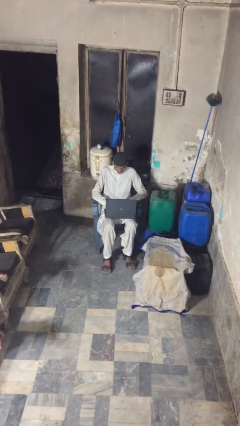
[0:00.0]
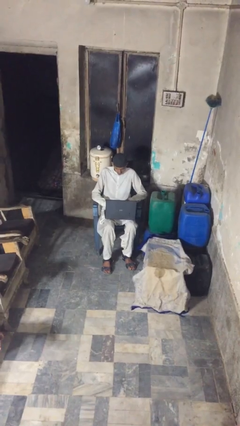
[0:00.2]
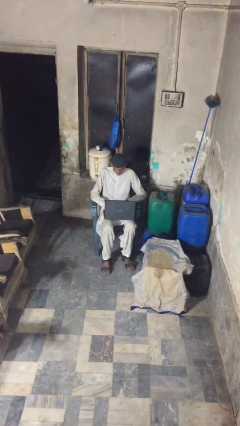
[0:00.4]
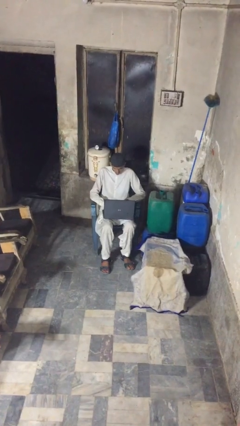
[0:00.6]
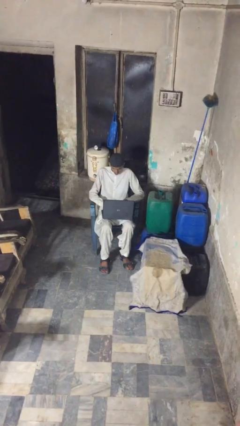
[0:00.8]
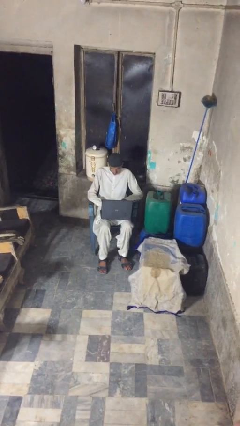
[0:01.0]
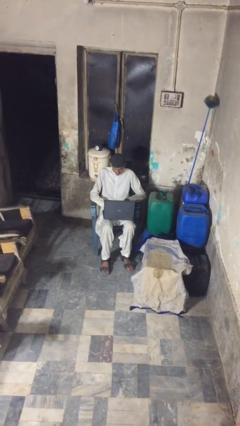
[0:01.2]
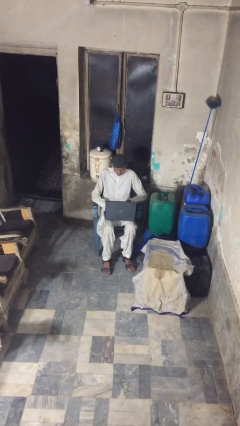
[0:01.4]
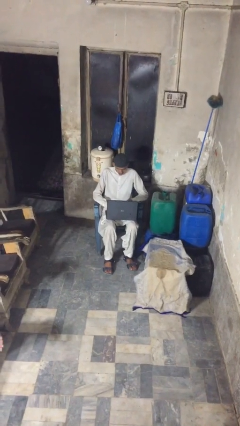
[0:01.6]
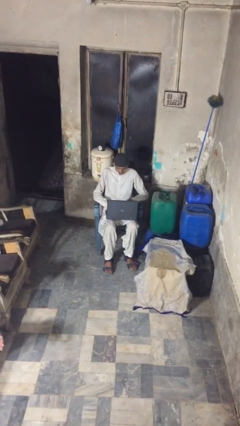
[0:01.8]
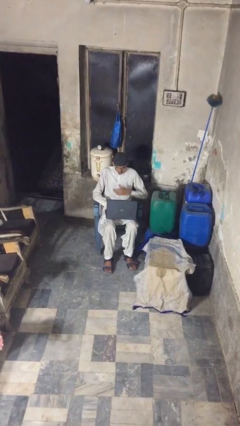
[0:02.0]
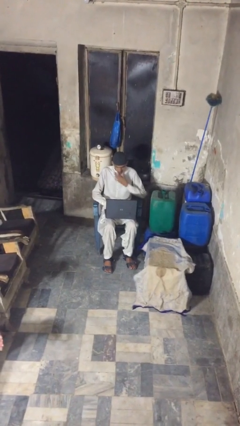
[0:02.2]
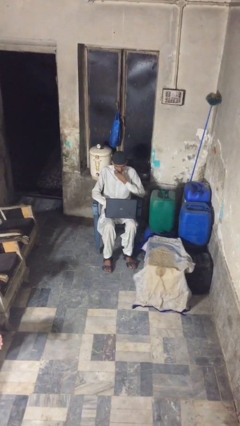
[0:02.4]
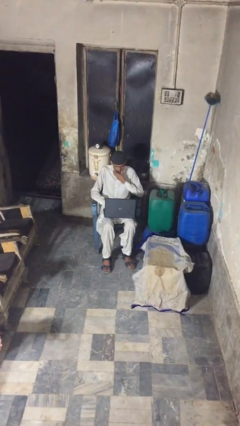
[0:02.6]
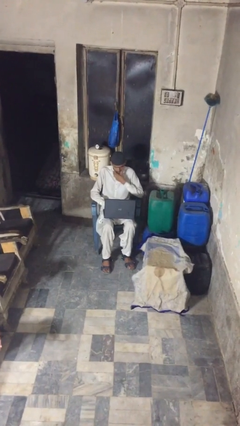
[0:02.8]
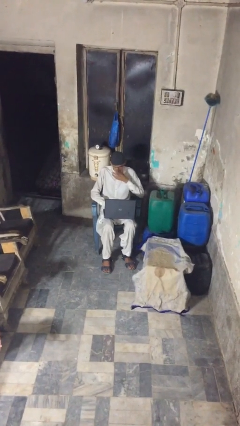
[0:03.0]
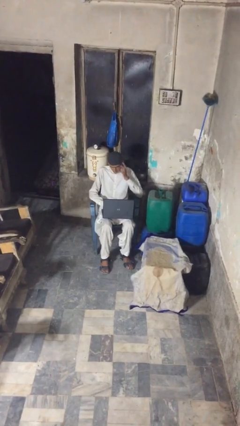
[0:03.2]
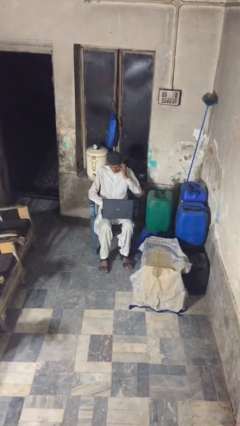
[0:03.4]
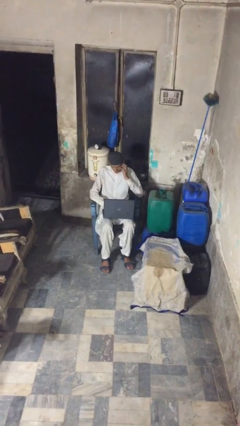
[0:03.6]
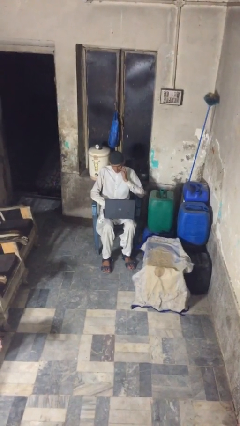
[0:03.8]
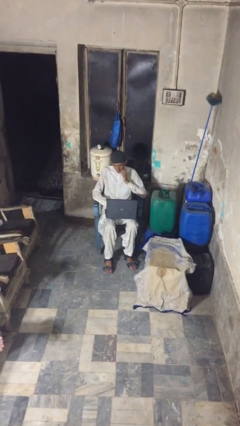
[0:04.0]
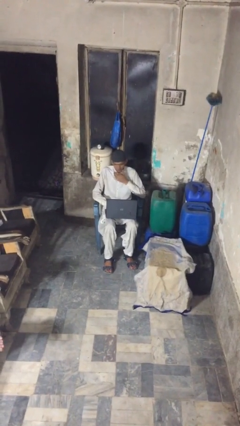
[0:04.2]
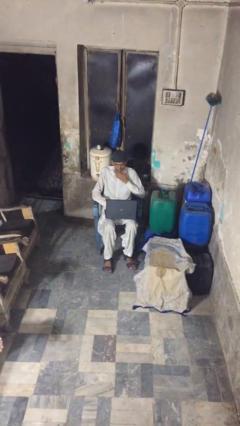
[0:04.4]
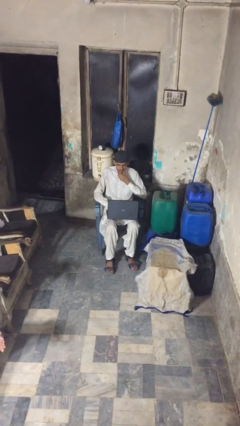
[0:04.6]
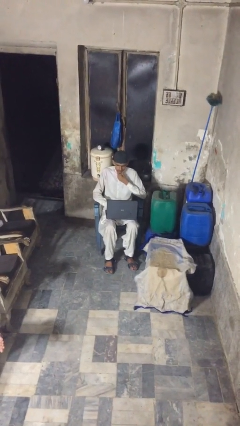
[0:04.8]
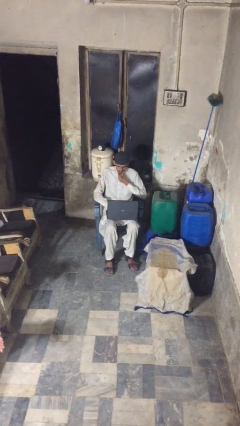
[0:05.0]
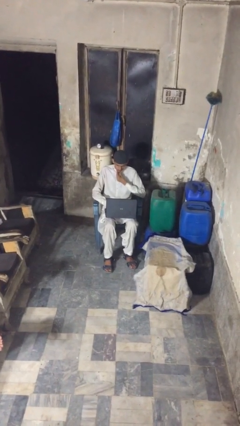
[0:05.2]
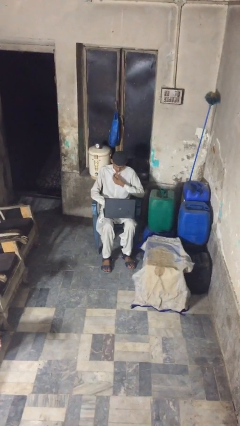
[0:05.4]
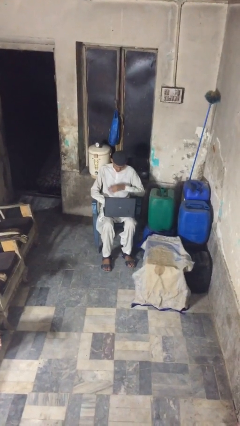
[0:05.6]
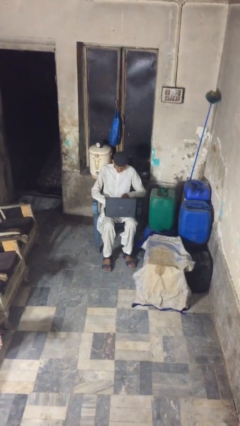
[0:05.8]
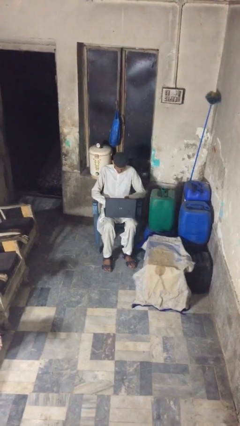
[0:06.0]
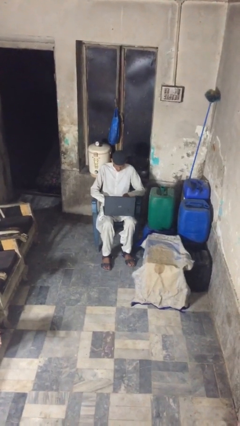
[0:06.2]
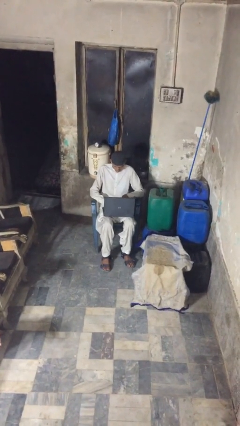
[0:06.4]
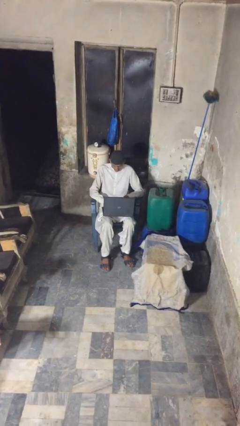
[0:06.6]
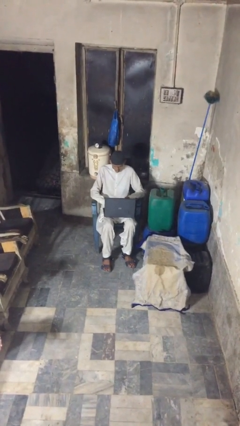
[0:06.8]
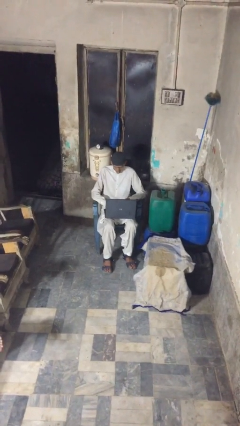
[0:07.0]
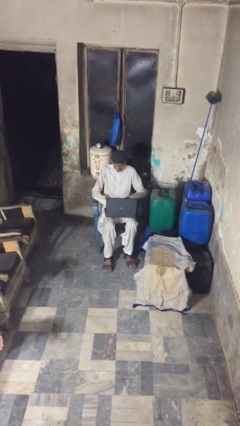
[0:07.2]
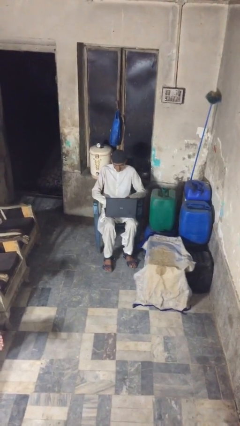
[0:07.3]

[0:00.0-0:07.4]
person interacts with laptop

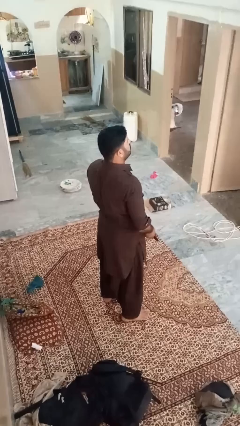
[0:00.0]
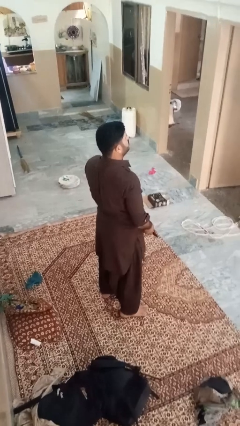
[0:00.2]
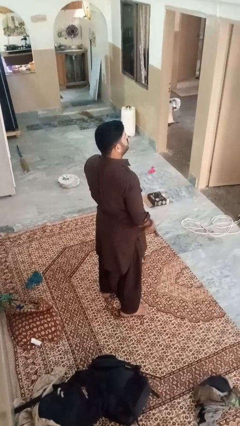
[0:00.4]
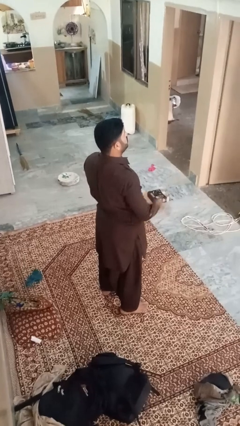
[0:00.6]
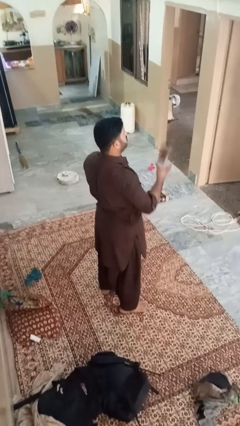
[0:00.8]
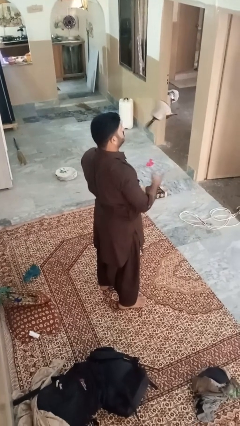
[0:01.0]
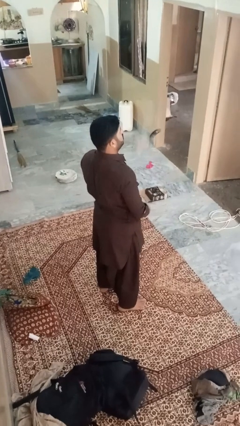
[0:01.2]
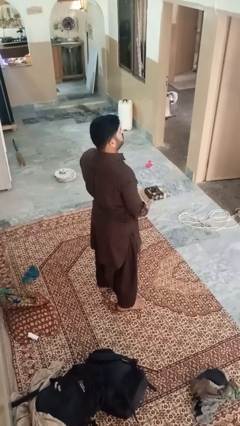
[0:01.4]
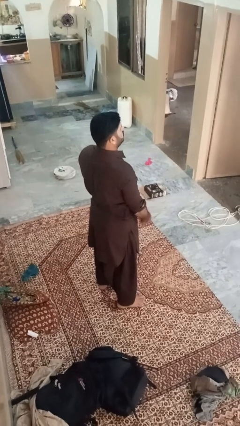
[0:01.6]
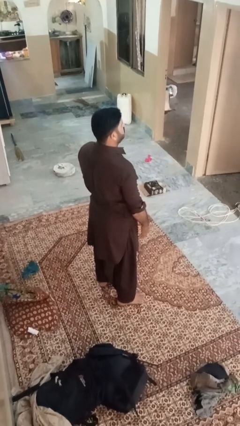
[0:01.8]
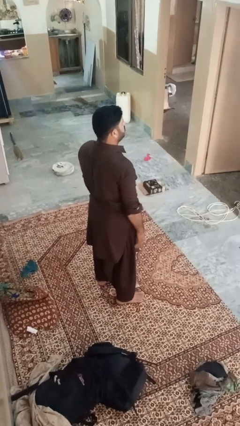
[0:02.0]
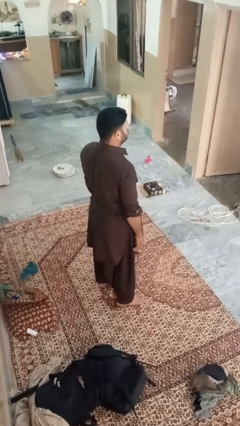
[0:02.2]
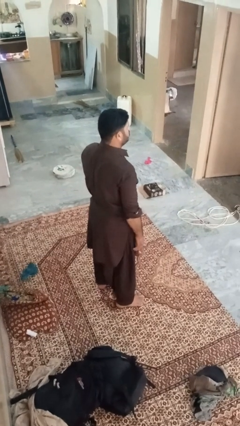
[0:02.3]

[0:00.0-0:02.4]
person throws object into air

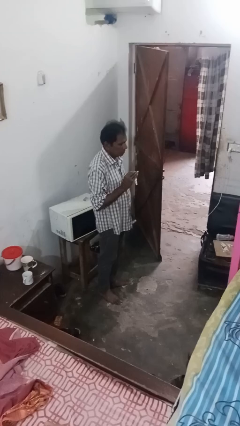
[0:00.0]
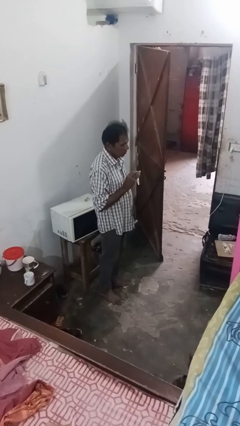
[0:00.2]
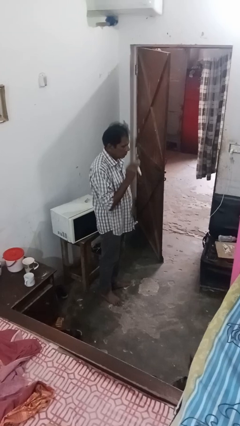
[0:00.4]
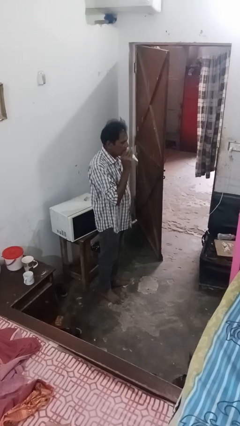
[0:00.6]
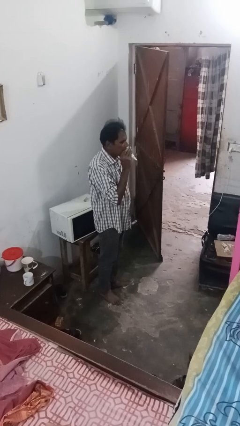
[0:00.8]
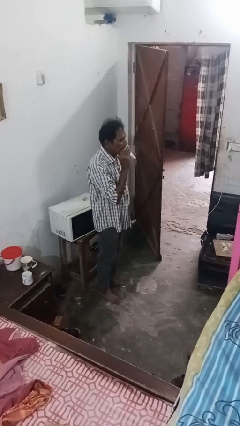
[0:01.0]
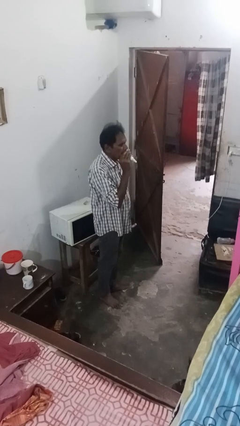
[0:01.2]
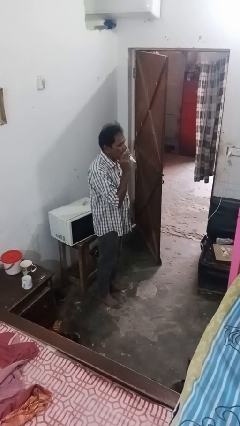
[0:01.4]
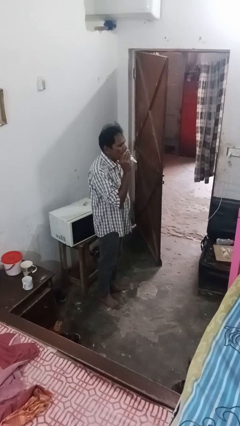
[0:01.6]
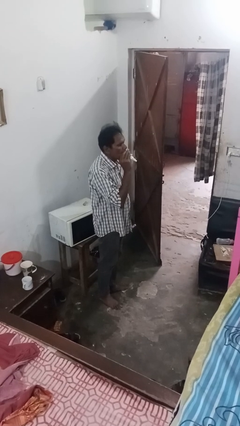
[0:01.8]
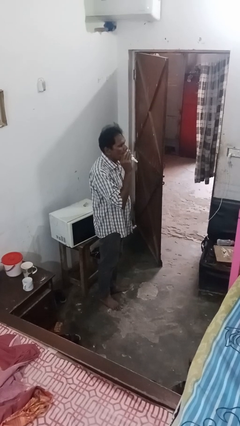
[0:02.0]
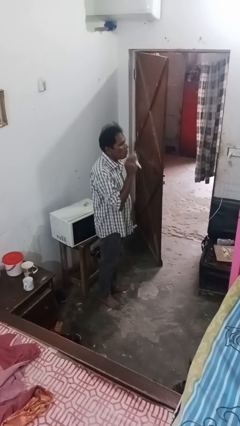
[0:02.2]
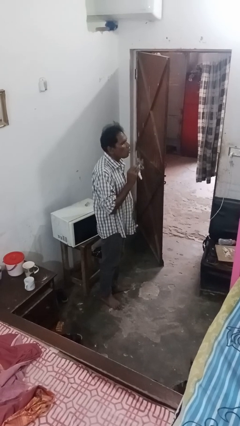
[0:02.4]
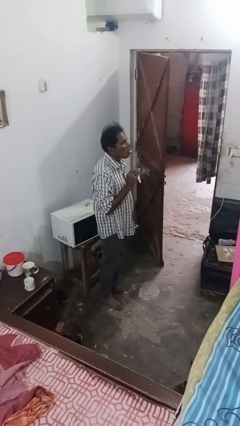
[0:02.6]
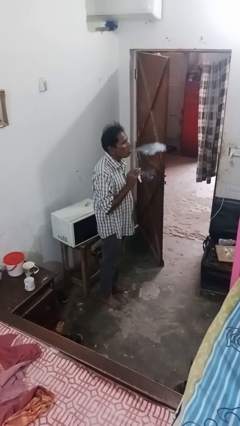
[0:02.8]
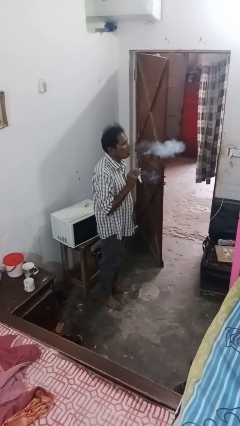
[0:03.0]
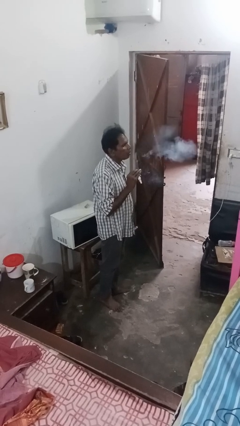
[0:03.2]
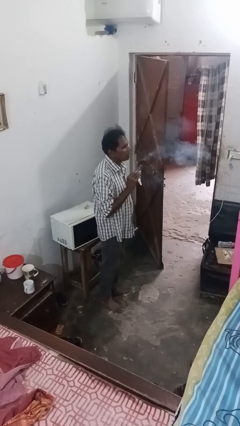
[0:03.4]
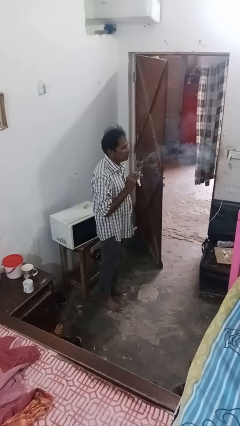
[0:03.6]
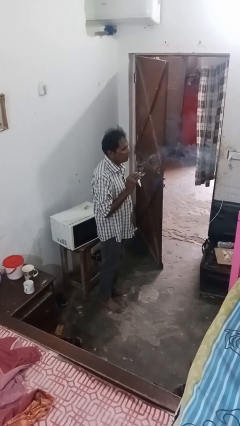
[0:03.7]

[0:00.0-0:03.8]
person vapes

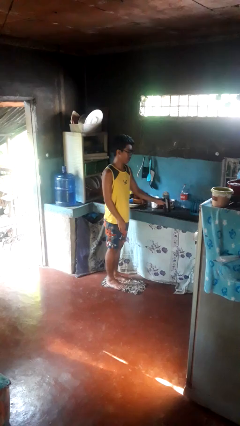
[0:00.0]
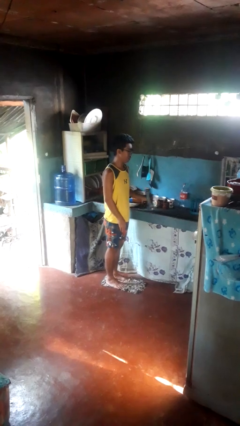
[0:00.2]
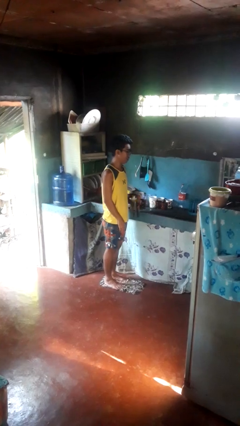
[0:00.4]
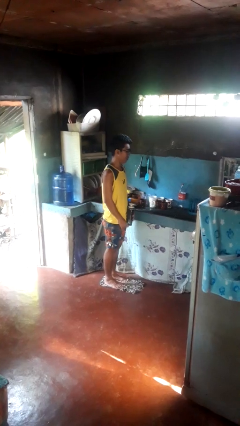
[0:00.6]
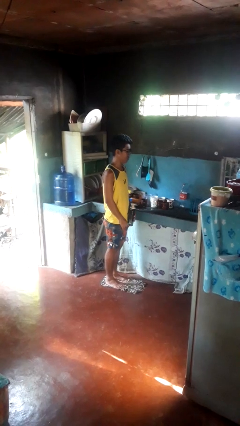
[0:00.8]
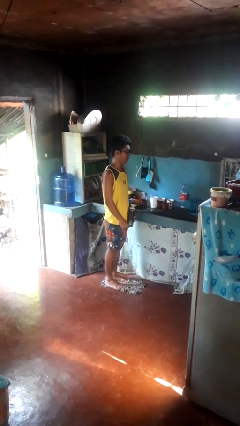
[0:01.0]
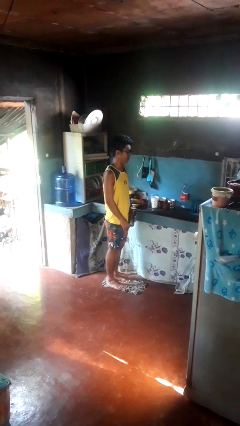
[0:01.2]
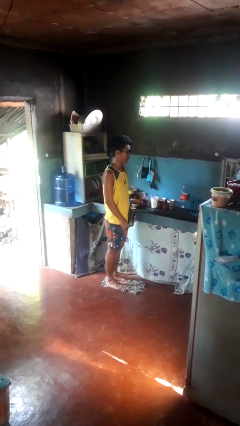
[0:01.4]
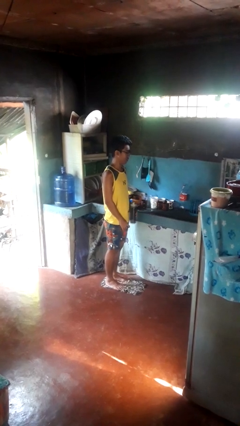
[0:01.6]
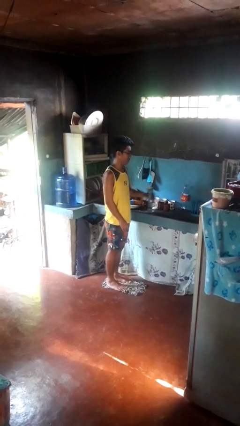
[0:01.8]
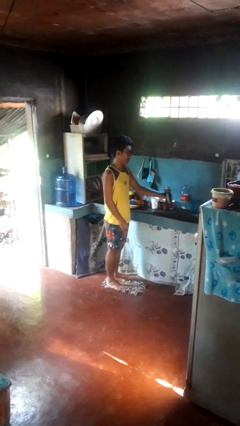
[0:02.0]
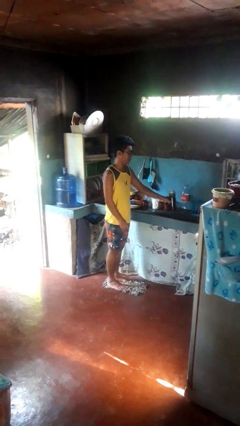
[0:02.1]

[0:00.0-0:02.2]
person picks up object from countertop

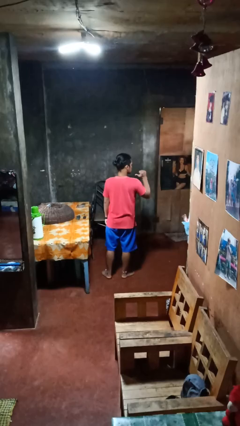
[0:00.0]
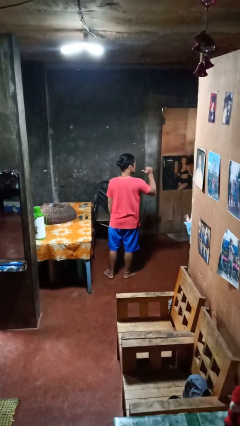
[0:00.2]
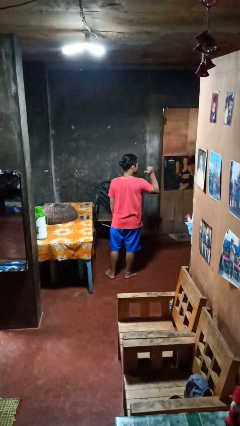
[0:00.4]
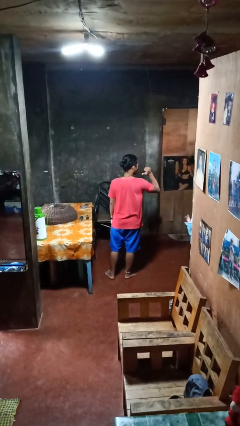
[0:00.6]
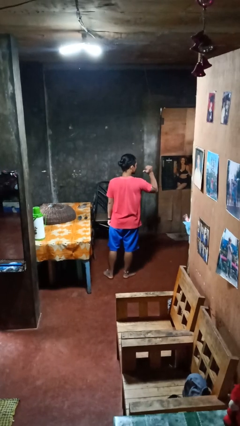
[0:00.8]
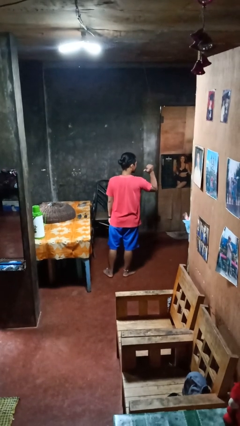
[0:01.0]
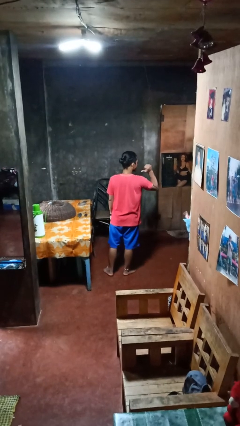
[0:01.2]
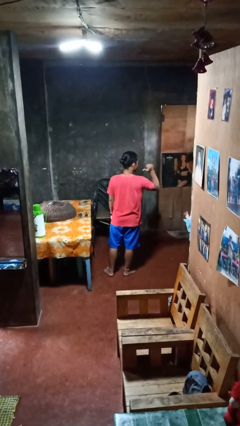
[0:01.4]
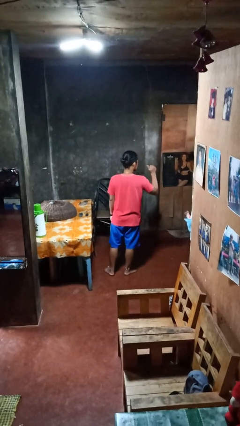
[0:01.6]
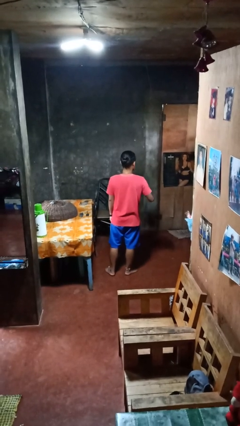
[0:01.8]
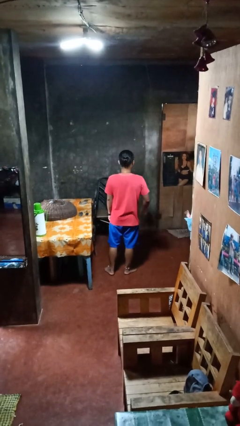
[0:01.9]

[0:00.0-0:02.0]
person gestures behind me

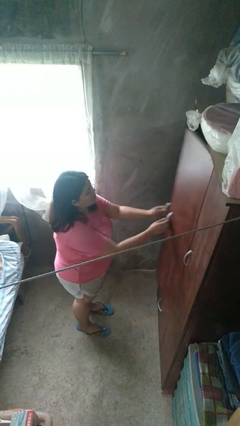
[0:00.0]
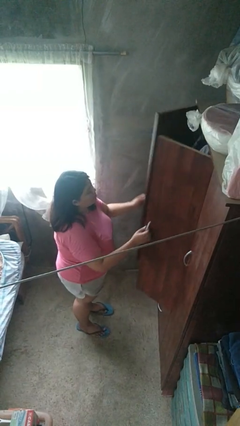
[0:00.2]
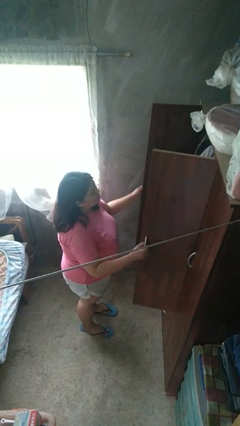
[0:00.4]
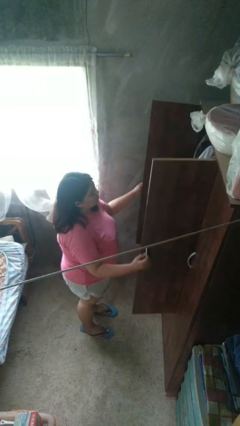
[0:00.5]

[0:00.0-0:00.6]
person opens closet door
